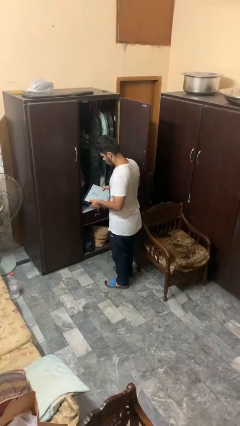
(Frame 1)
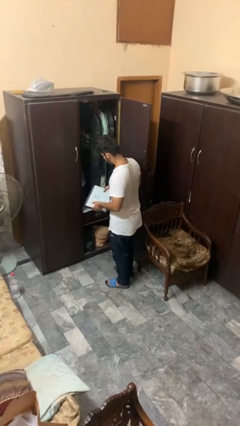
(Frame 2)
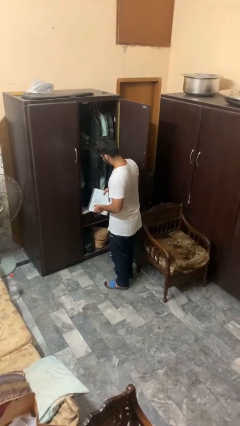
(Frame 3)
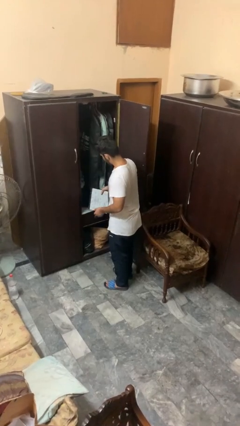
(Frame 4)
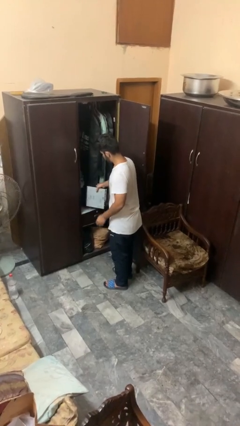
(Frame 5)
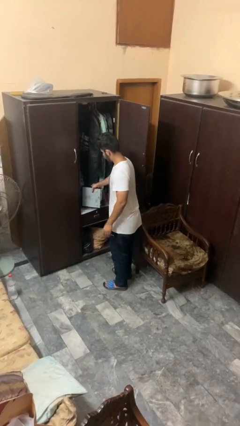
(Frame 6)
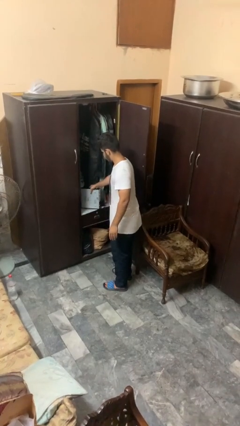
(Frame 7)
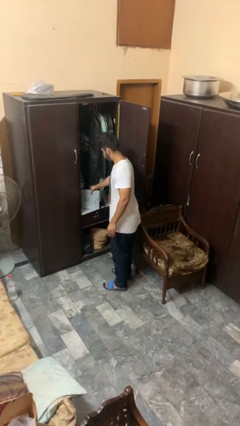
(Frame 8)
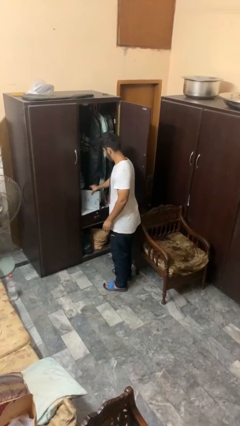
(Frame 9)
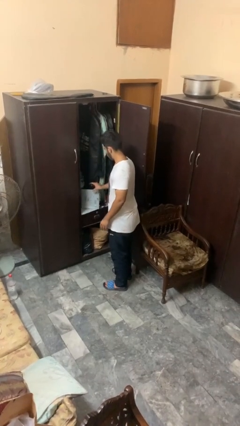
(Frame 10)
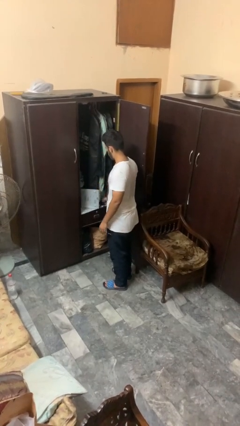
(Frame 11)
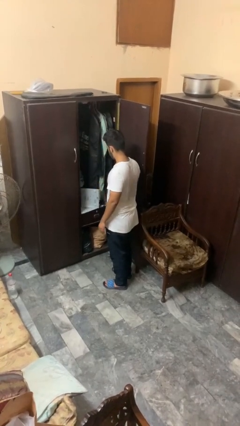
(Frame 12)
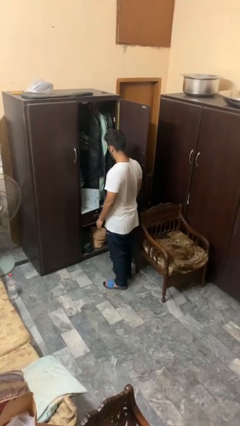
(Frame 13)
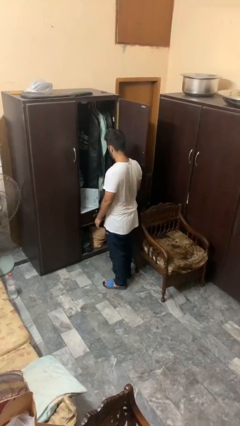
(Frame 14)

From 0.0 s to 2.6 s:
person puts down object into cabinet

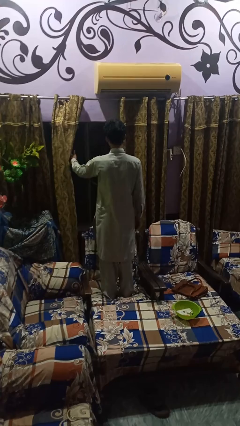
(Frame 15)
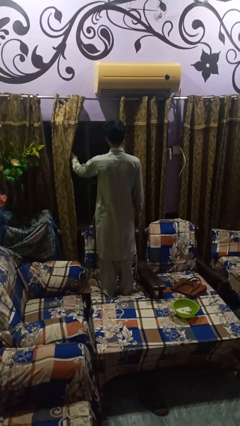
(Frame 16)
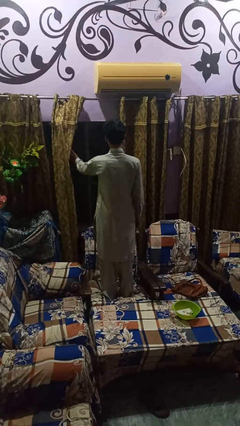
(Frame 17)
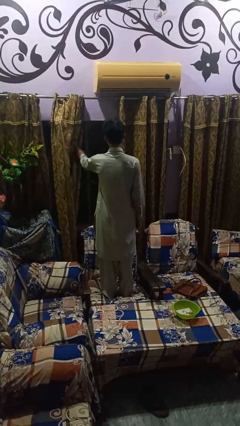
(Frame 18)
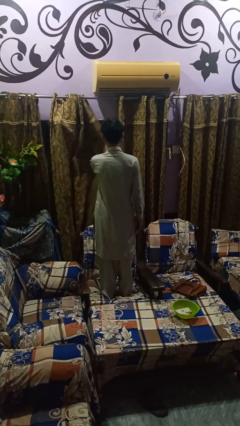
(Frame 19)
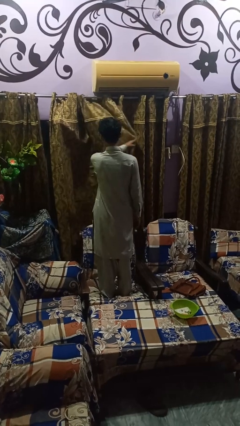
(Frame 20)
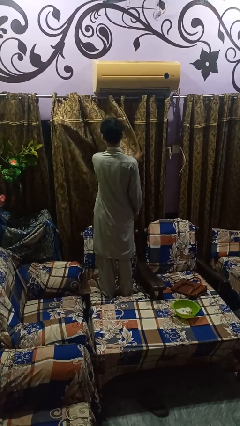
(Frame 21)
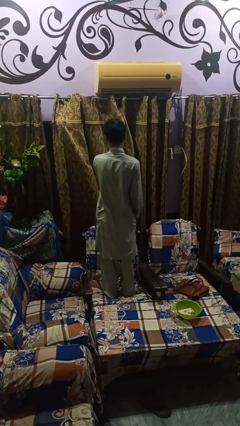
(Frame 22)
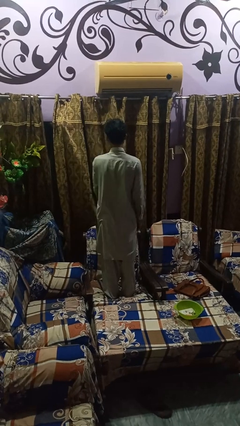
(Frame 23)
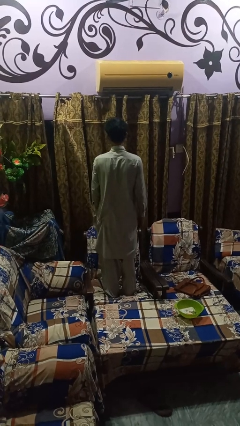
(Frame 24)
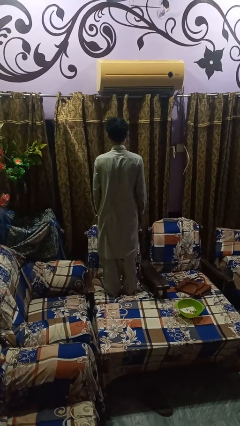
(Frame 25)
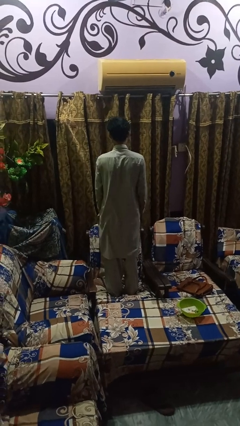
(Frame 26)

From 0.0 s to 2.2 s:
person closes curtains

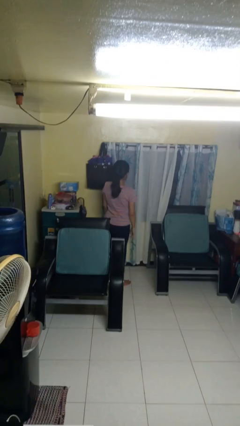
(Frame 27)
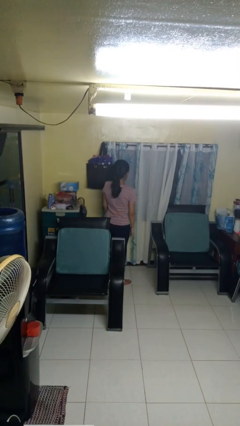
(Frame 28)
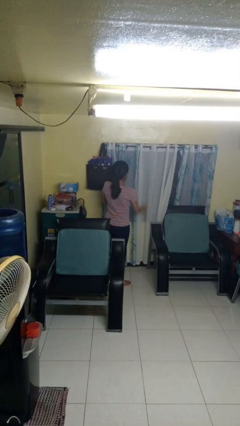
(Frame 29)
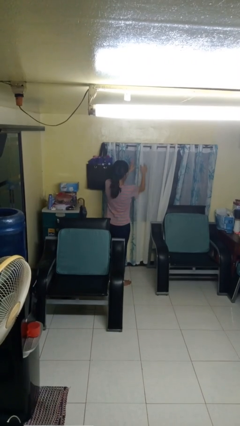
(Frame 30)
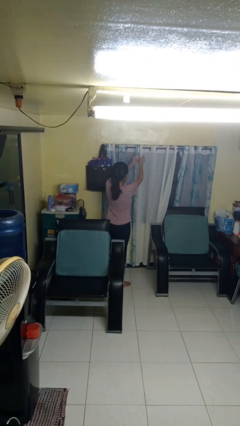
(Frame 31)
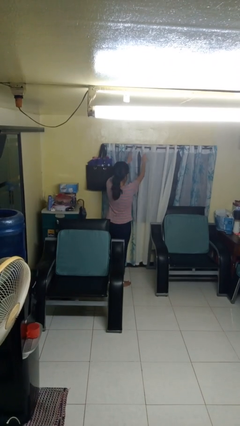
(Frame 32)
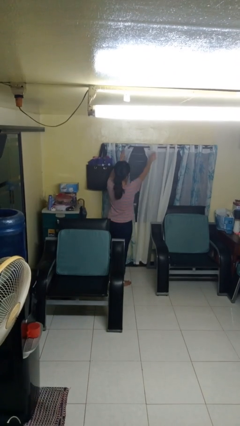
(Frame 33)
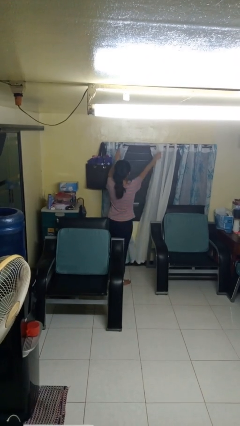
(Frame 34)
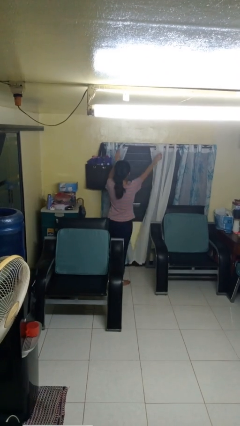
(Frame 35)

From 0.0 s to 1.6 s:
person opens curtains

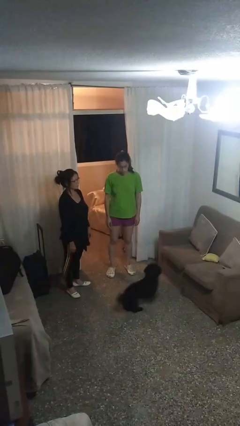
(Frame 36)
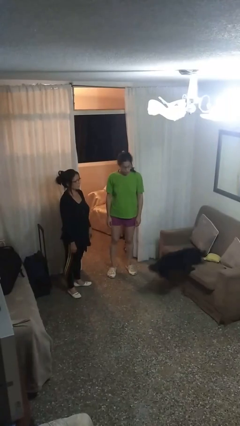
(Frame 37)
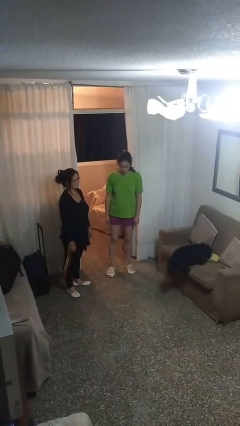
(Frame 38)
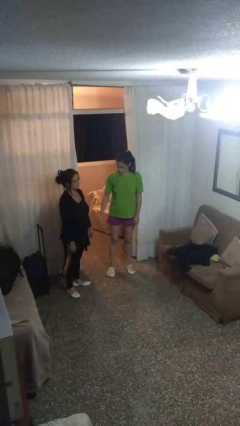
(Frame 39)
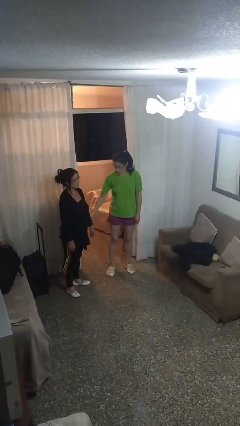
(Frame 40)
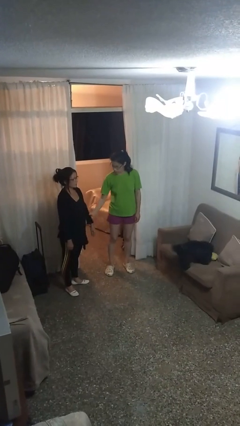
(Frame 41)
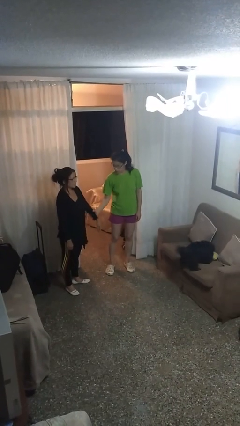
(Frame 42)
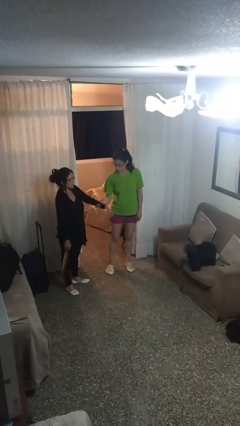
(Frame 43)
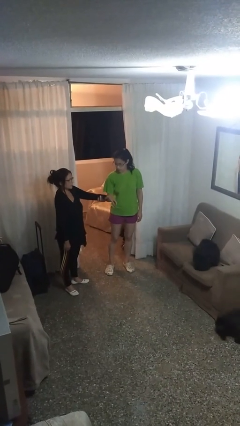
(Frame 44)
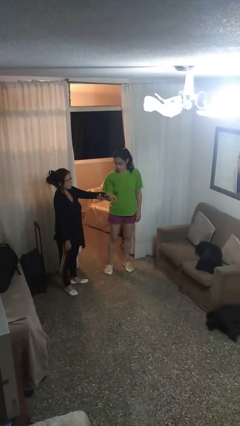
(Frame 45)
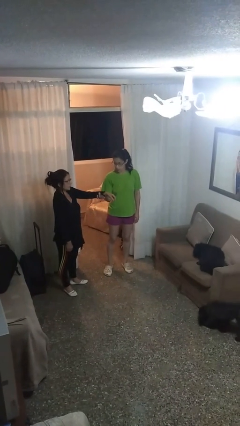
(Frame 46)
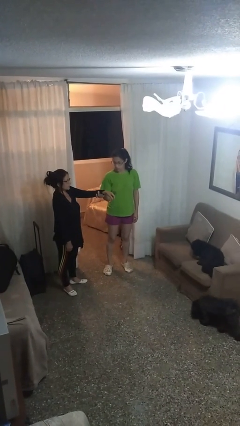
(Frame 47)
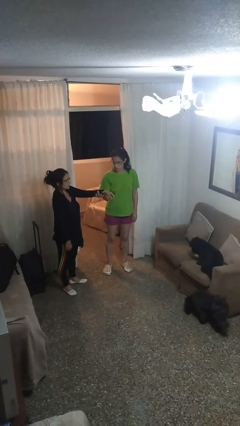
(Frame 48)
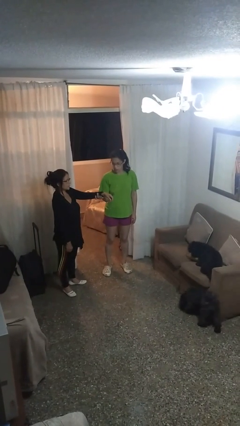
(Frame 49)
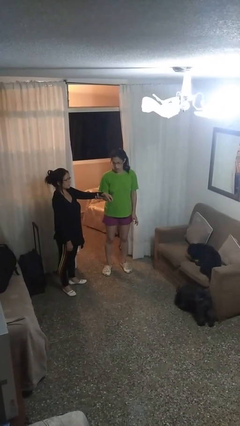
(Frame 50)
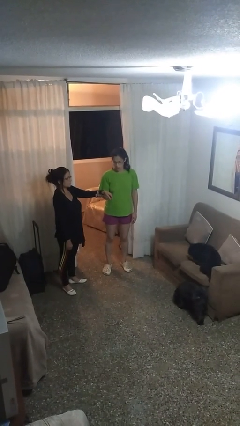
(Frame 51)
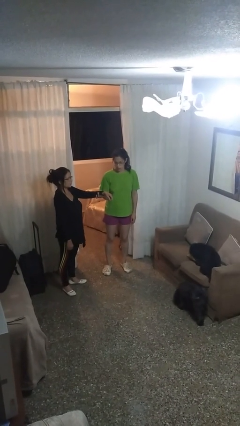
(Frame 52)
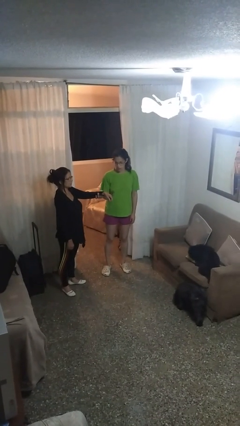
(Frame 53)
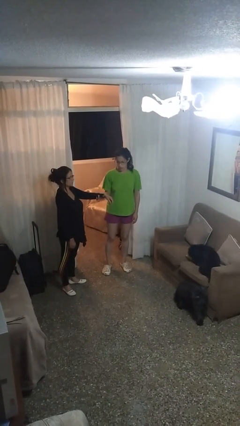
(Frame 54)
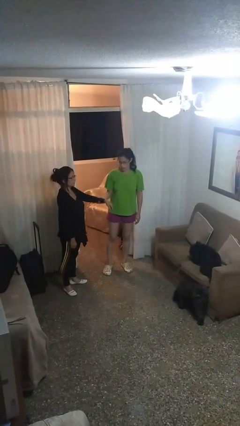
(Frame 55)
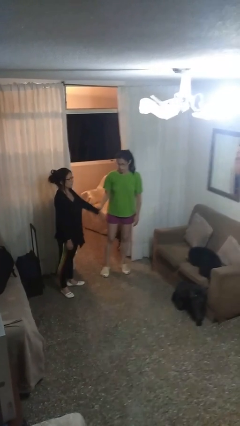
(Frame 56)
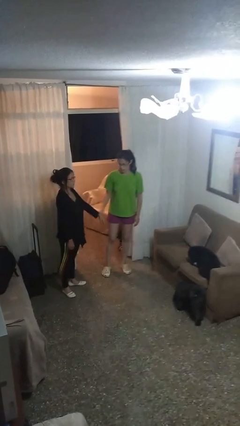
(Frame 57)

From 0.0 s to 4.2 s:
person grabs person by forearm

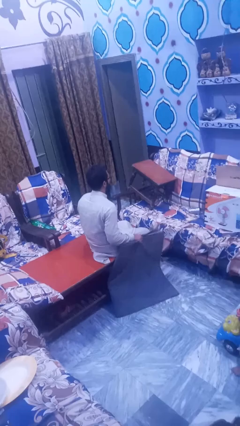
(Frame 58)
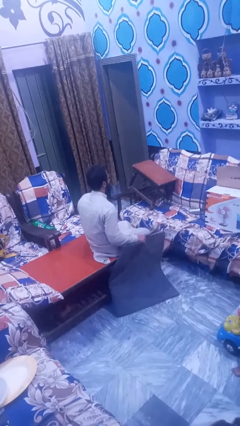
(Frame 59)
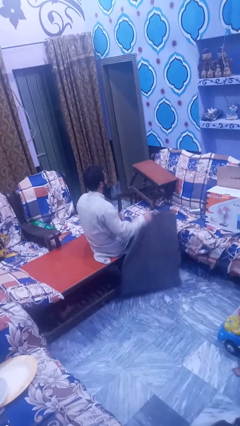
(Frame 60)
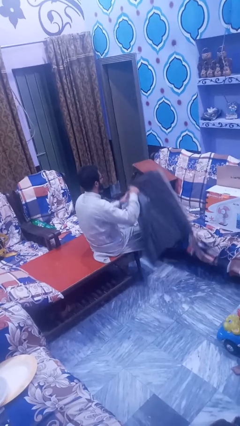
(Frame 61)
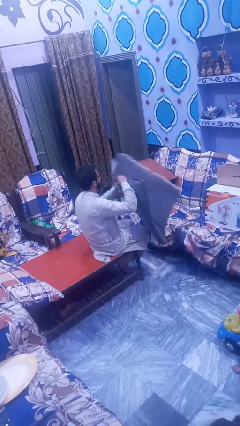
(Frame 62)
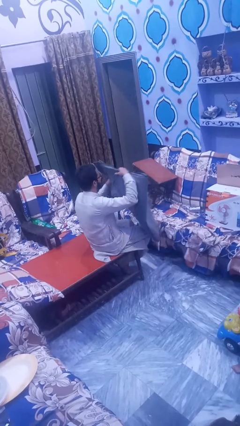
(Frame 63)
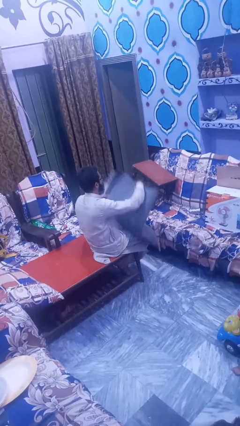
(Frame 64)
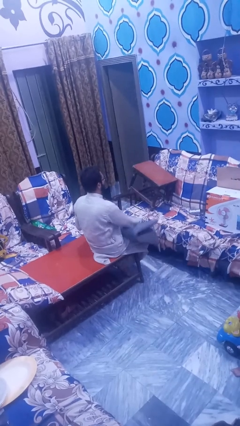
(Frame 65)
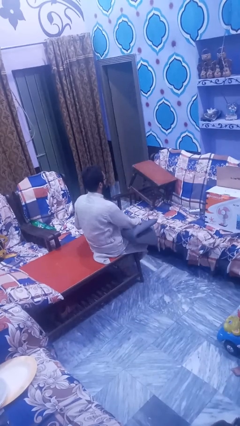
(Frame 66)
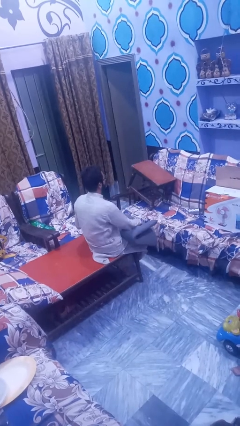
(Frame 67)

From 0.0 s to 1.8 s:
person folds blanket

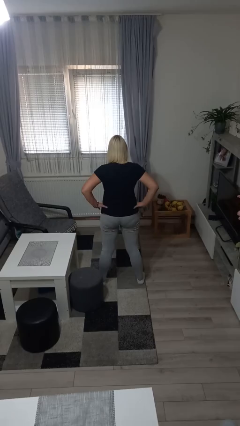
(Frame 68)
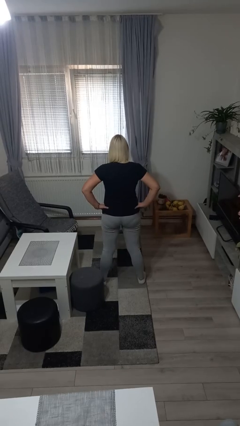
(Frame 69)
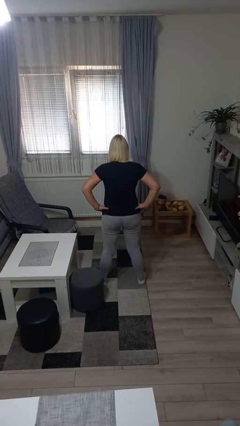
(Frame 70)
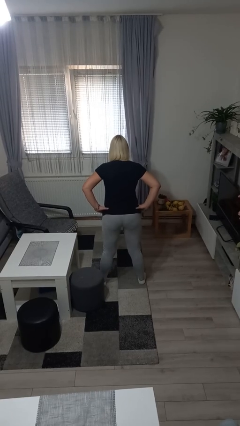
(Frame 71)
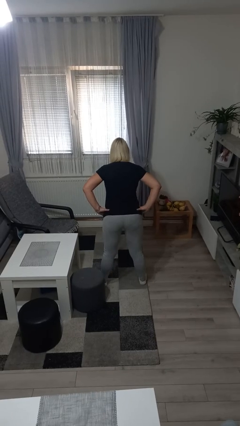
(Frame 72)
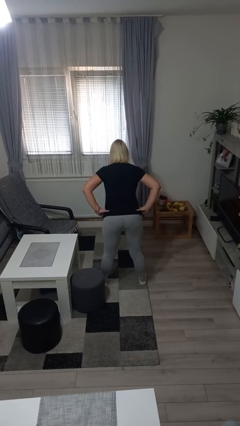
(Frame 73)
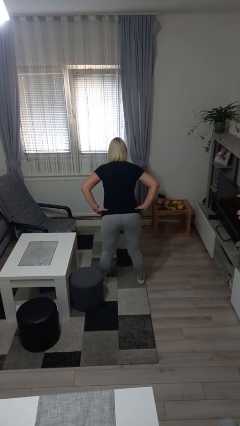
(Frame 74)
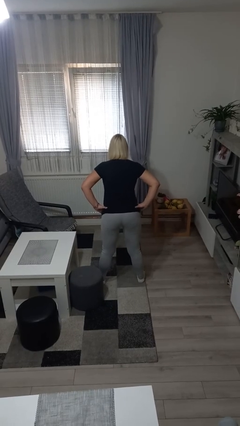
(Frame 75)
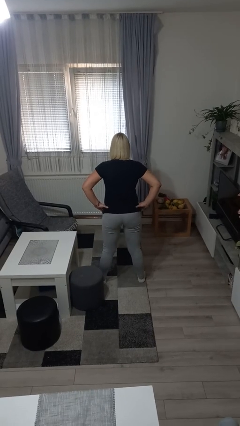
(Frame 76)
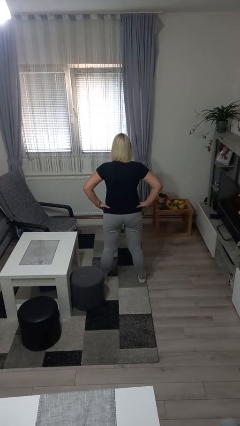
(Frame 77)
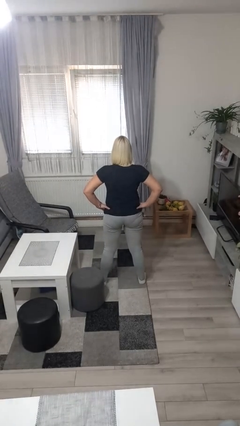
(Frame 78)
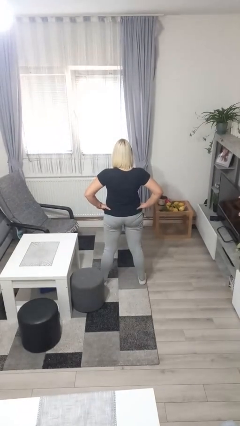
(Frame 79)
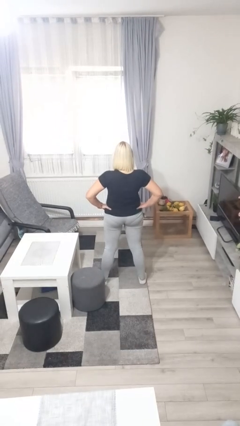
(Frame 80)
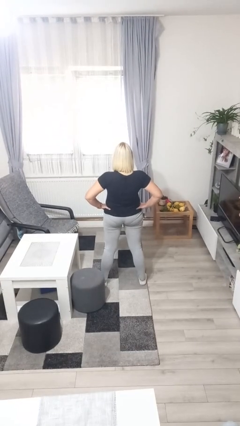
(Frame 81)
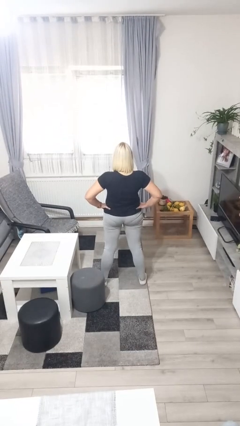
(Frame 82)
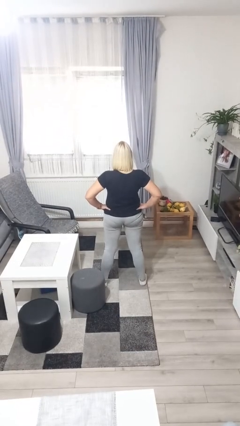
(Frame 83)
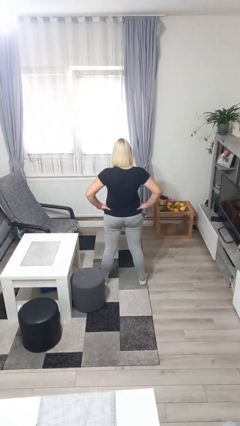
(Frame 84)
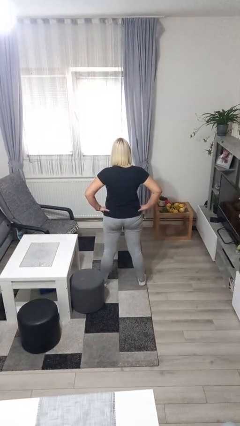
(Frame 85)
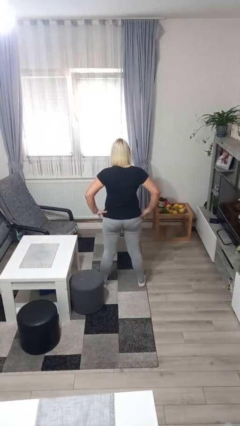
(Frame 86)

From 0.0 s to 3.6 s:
person wiggles hips

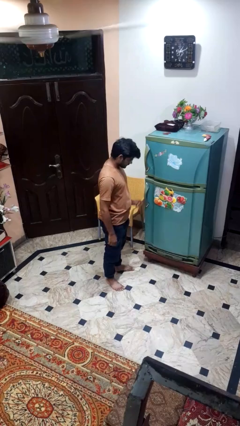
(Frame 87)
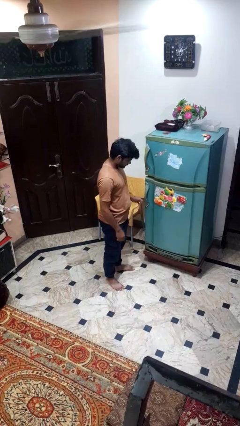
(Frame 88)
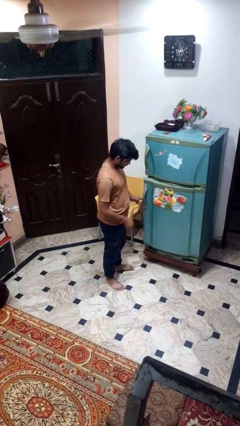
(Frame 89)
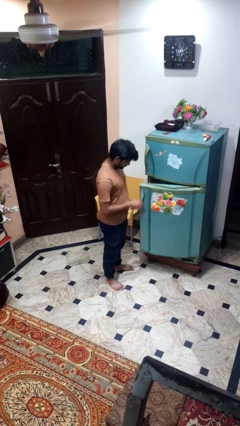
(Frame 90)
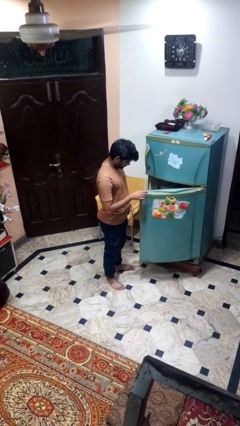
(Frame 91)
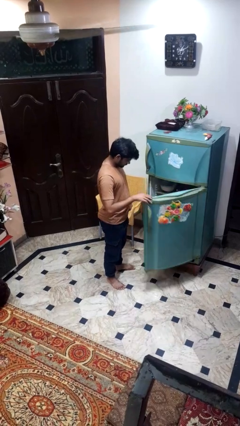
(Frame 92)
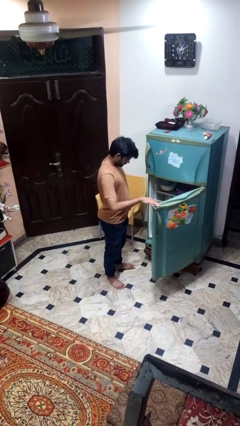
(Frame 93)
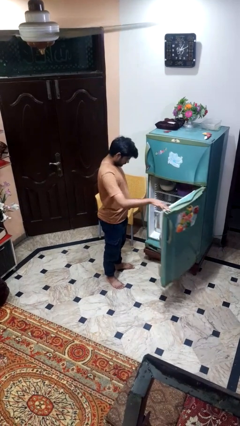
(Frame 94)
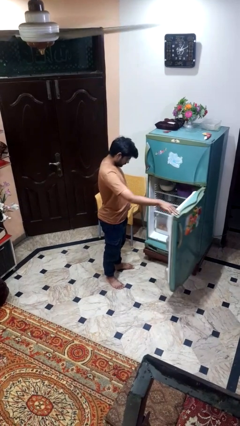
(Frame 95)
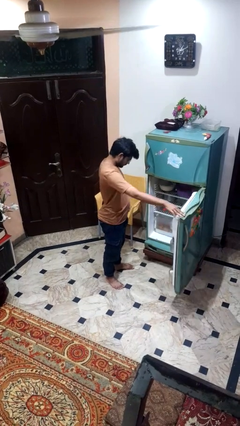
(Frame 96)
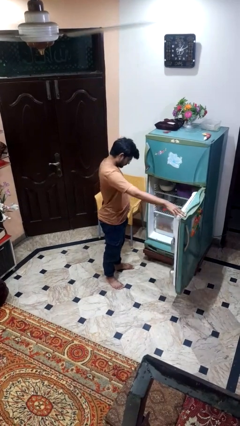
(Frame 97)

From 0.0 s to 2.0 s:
person opens refrigerator
